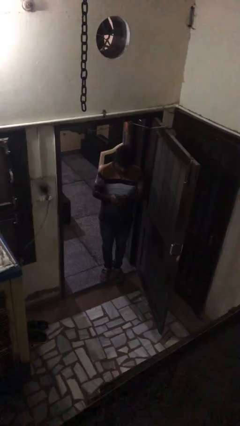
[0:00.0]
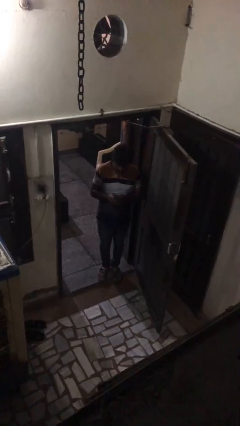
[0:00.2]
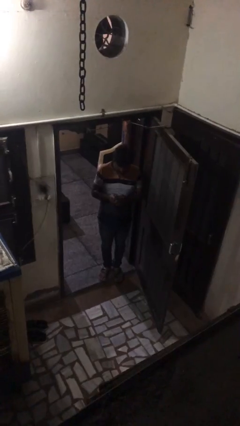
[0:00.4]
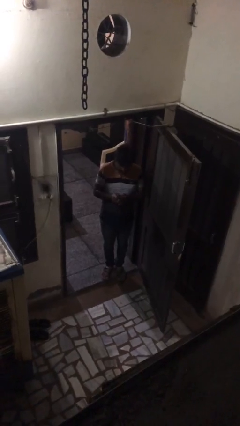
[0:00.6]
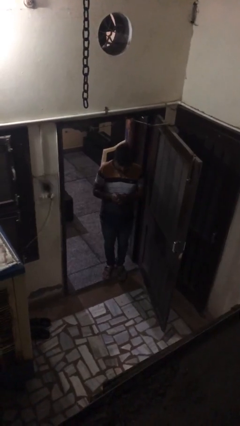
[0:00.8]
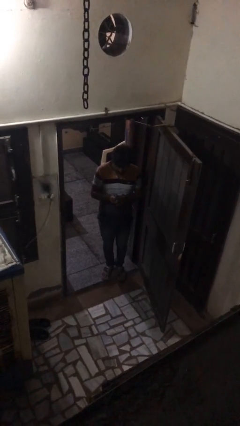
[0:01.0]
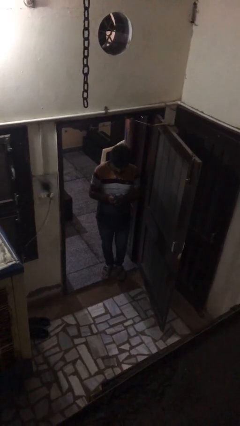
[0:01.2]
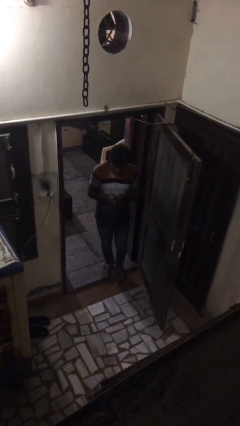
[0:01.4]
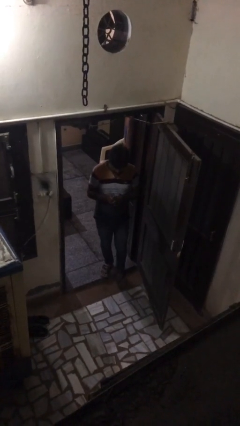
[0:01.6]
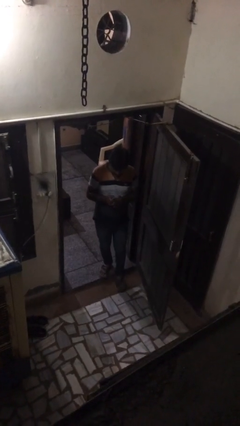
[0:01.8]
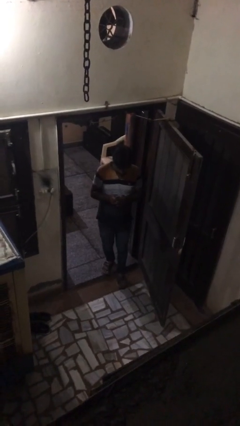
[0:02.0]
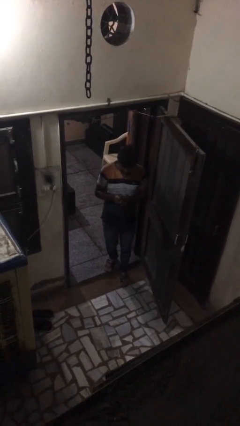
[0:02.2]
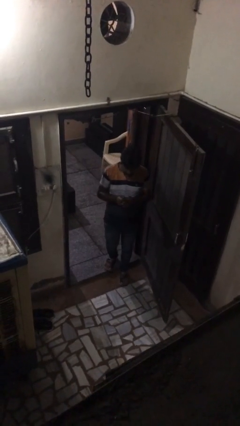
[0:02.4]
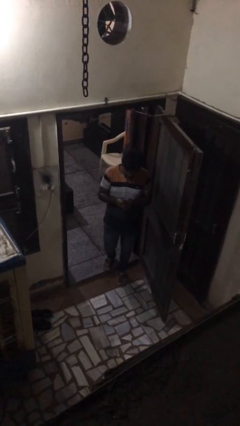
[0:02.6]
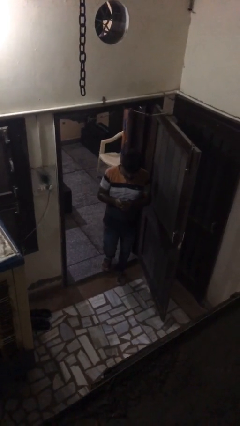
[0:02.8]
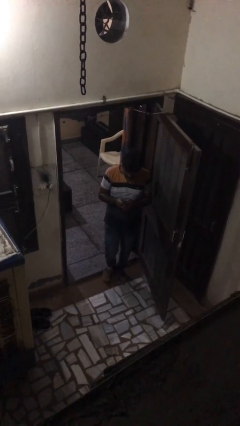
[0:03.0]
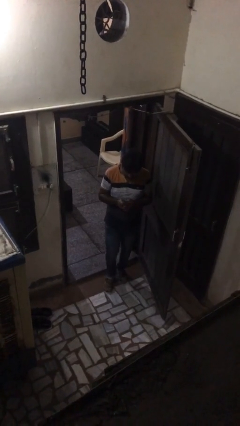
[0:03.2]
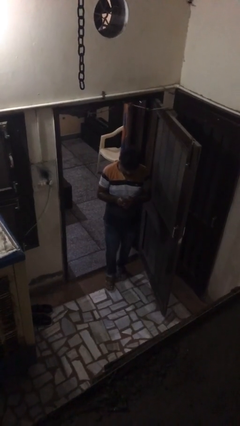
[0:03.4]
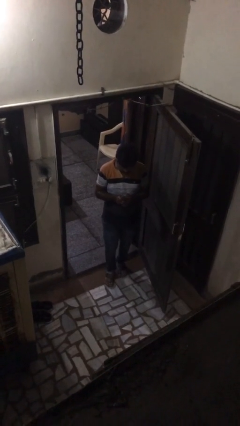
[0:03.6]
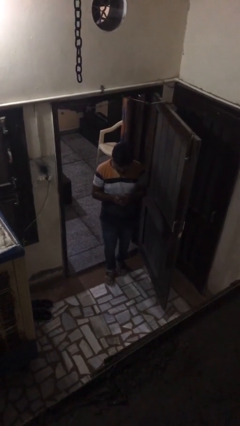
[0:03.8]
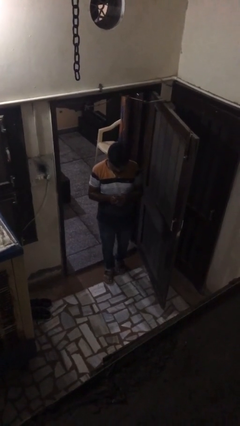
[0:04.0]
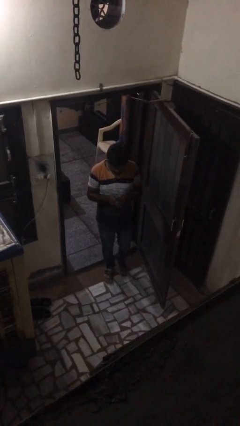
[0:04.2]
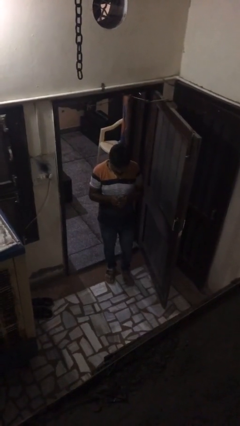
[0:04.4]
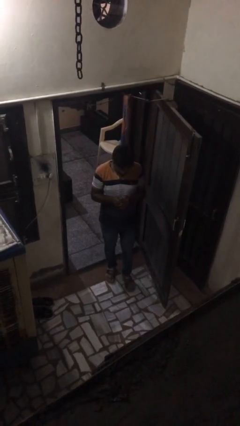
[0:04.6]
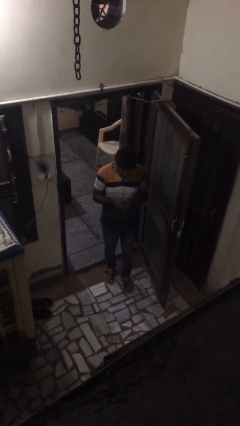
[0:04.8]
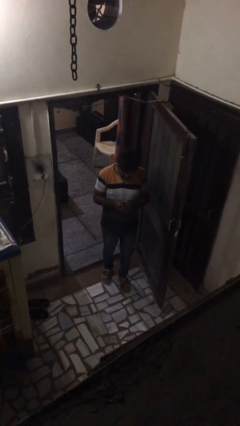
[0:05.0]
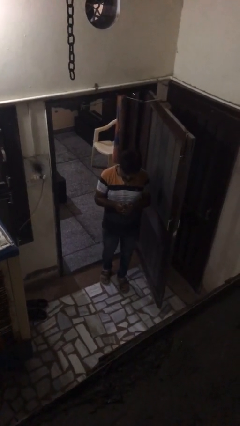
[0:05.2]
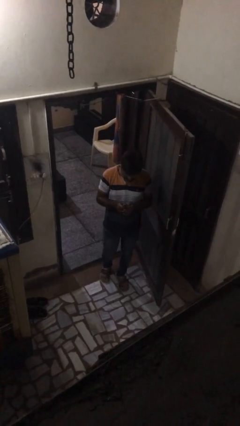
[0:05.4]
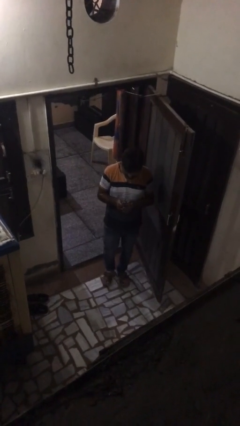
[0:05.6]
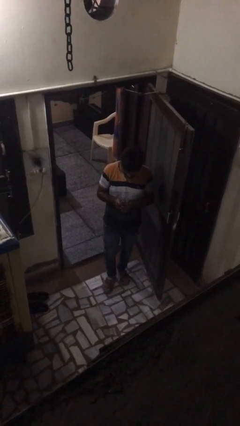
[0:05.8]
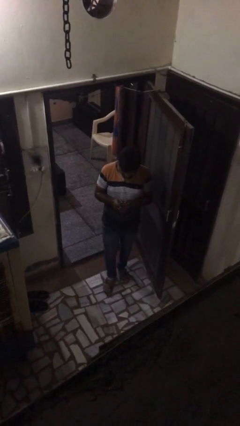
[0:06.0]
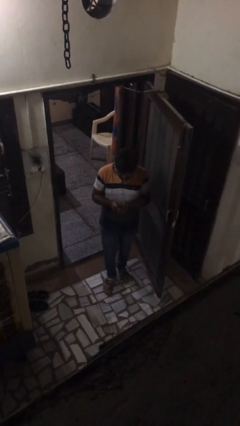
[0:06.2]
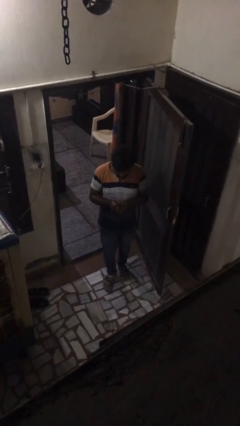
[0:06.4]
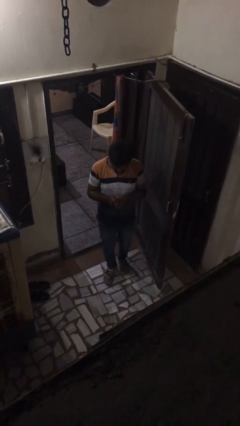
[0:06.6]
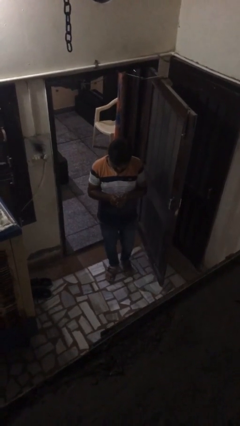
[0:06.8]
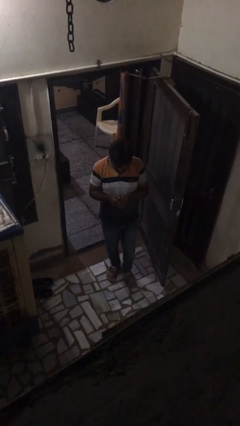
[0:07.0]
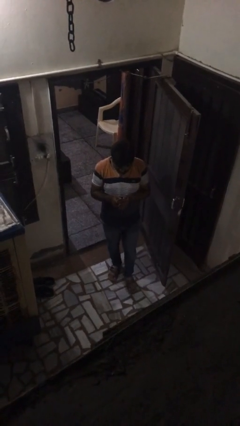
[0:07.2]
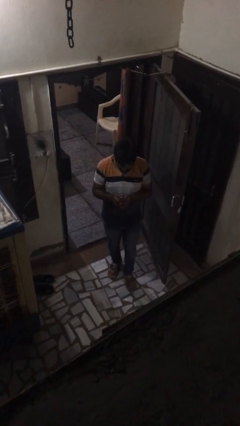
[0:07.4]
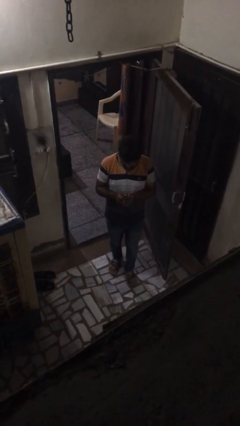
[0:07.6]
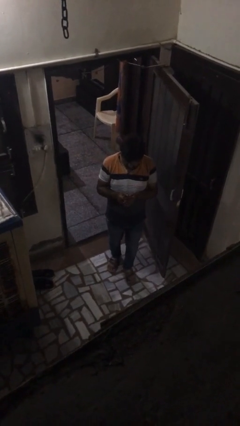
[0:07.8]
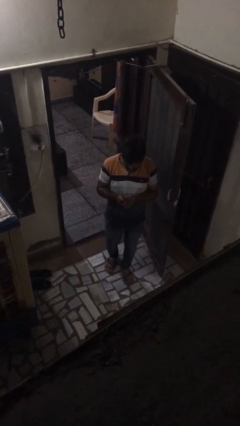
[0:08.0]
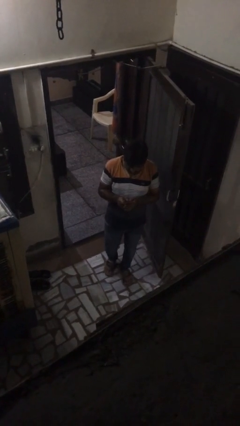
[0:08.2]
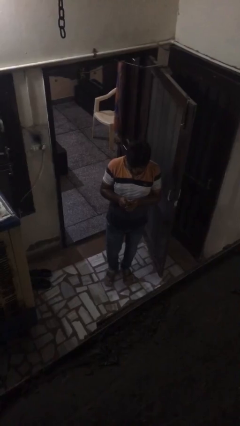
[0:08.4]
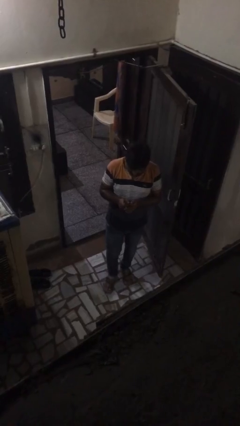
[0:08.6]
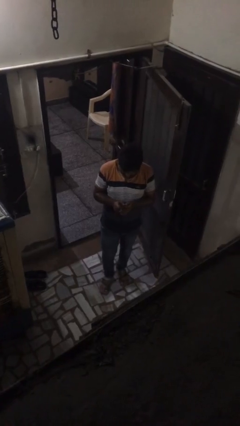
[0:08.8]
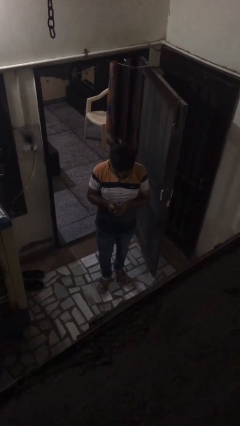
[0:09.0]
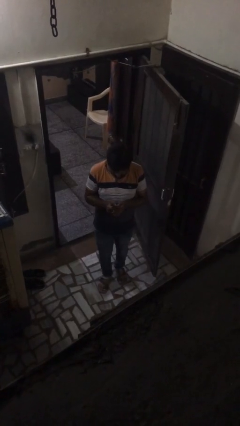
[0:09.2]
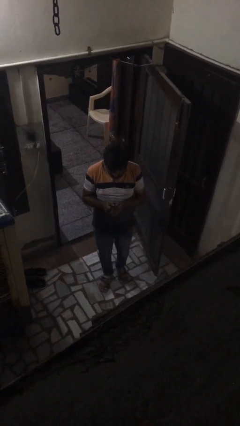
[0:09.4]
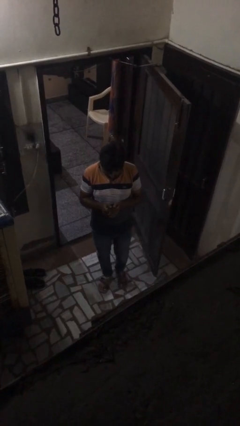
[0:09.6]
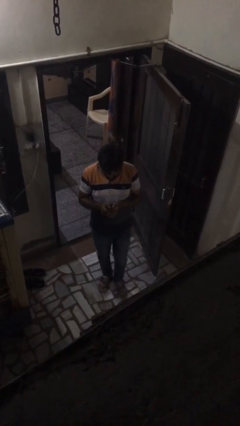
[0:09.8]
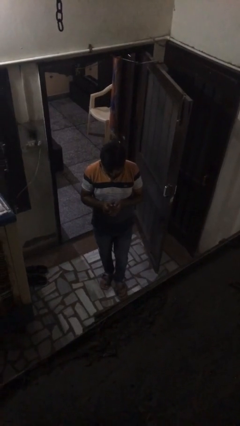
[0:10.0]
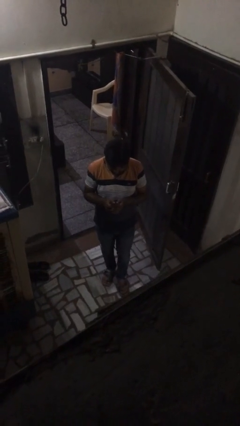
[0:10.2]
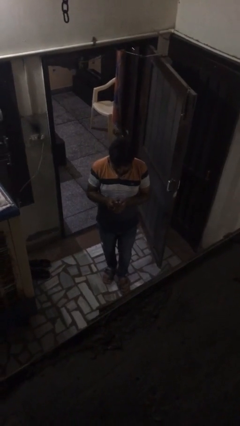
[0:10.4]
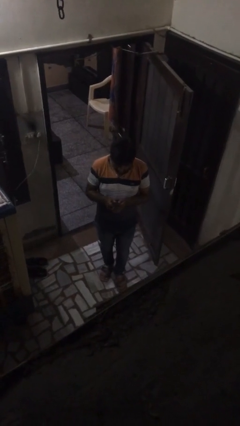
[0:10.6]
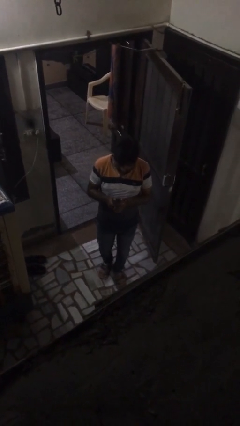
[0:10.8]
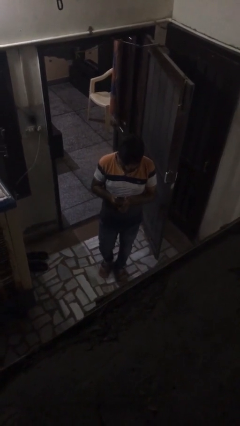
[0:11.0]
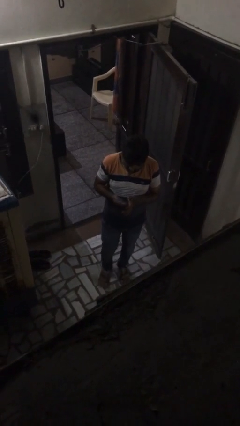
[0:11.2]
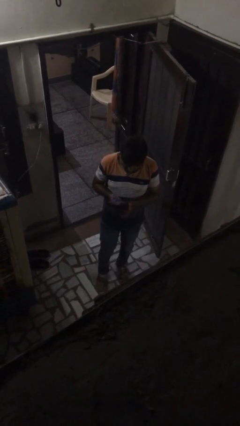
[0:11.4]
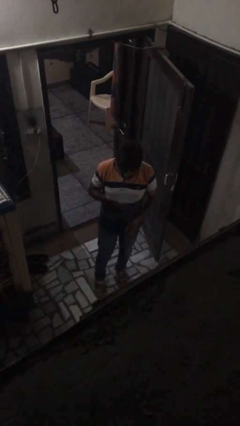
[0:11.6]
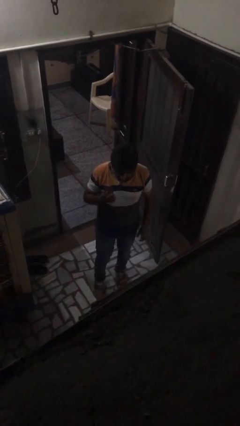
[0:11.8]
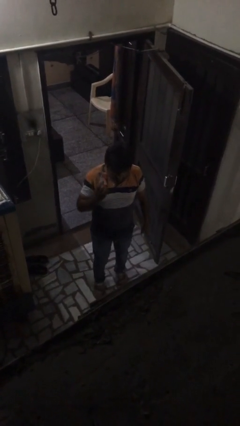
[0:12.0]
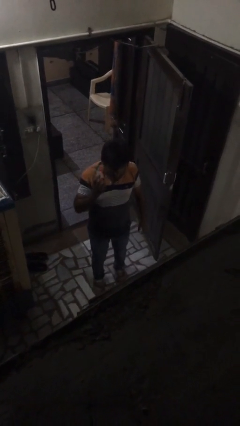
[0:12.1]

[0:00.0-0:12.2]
person texts on phone

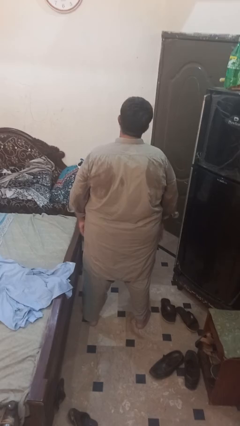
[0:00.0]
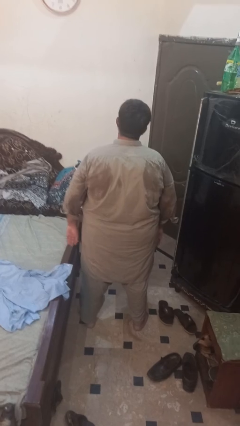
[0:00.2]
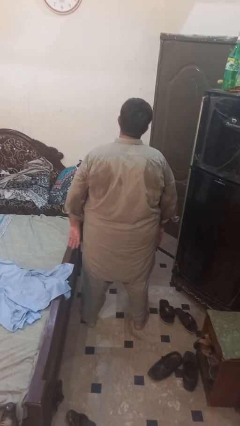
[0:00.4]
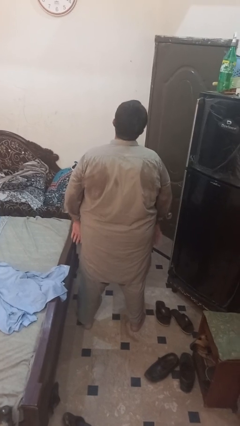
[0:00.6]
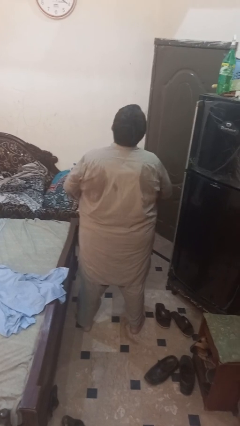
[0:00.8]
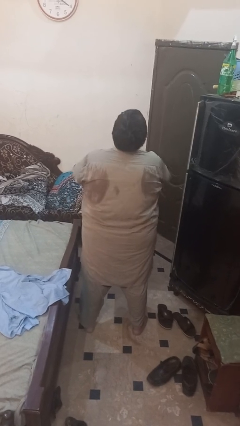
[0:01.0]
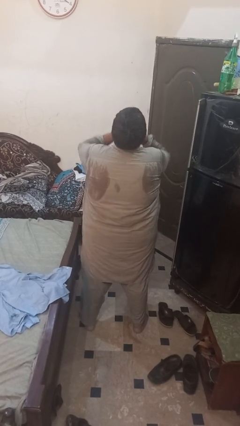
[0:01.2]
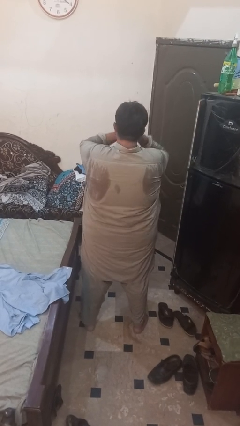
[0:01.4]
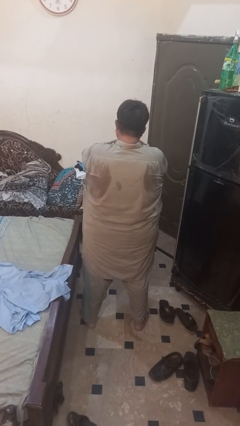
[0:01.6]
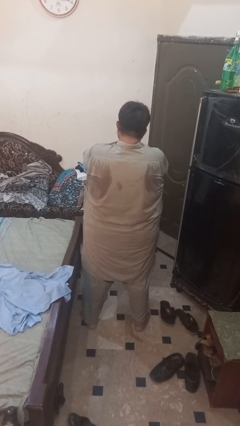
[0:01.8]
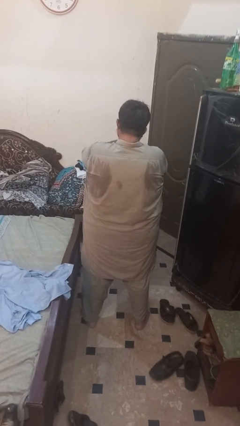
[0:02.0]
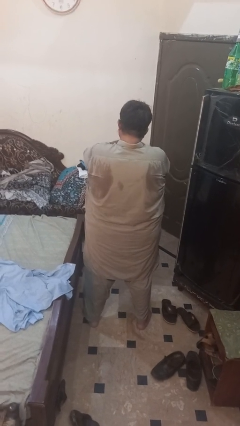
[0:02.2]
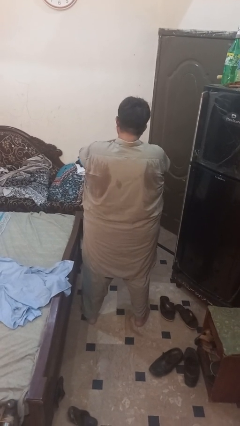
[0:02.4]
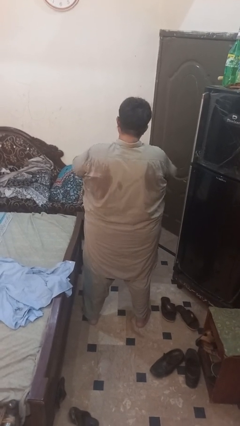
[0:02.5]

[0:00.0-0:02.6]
person sneezes into hand

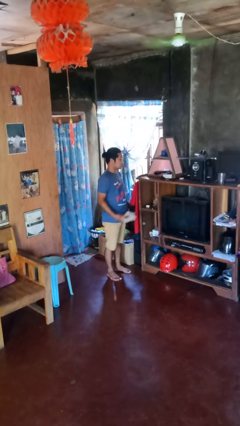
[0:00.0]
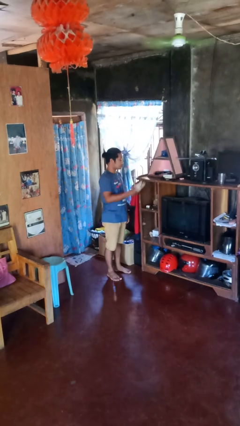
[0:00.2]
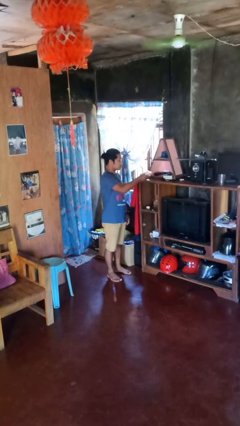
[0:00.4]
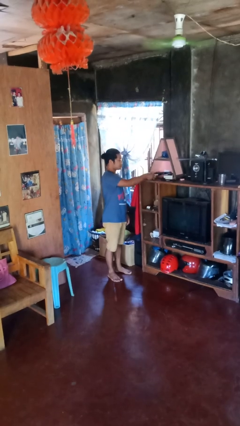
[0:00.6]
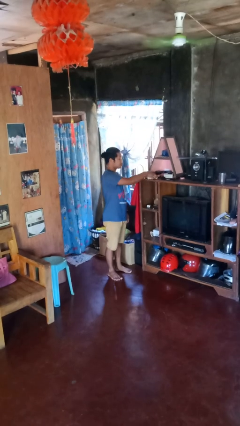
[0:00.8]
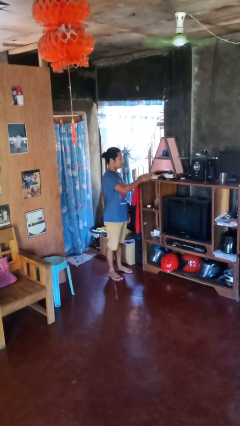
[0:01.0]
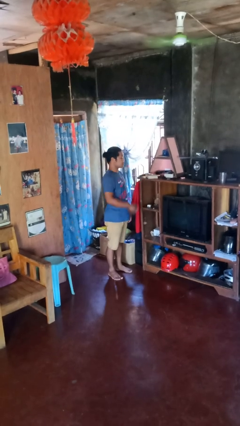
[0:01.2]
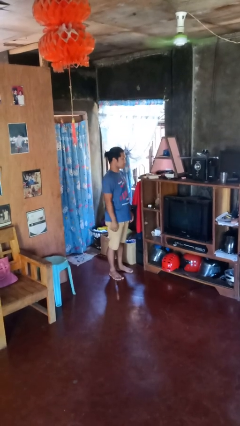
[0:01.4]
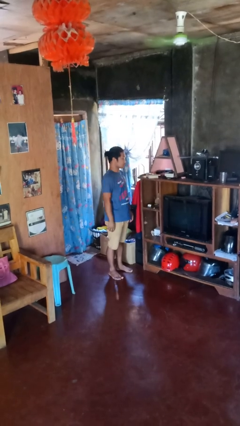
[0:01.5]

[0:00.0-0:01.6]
person puts down object on shelf

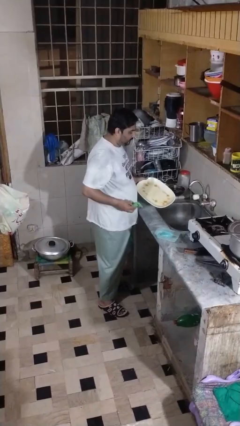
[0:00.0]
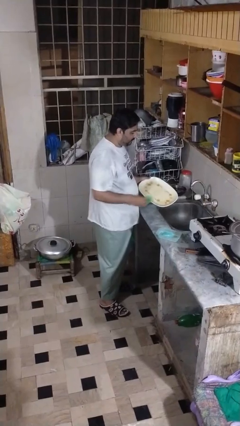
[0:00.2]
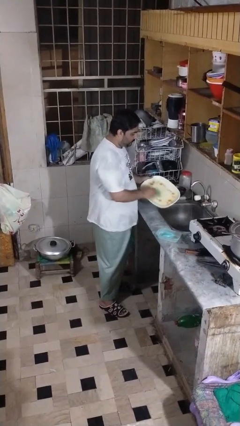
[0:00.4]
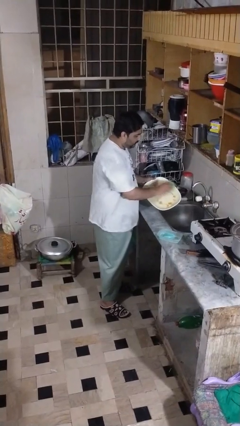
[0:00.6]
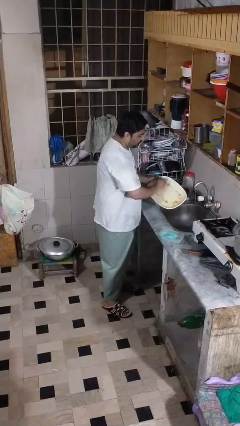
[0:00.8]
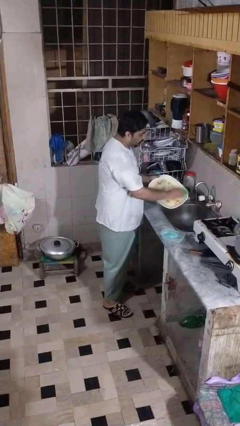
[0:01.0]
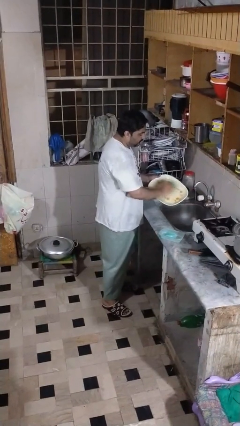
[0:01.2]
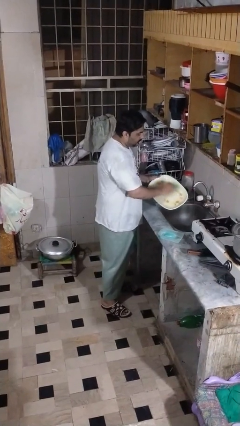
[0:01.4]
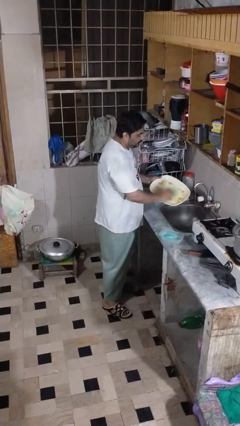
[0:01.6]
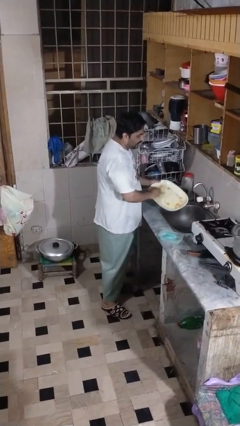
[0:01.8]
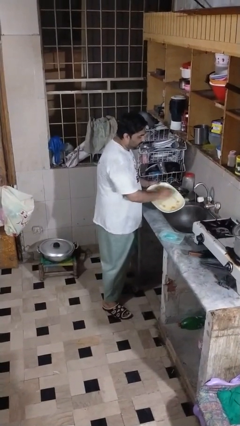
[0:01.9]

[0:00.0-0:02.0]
person washes dish
